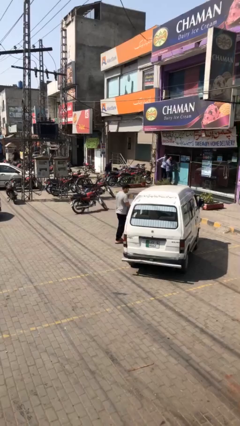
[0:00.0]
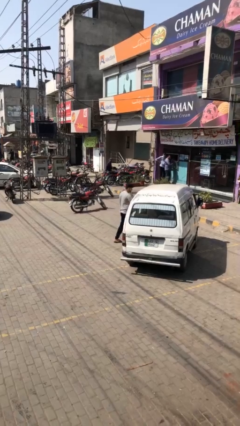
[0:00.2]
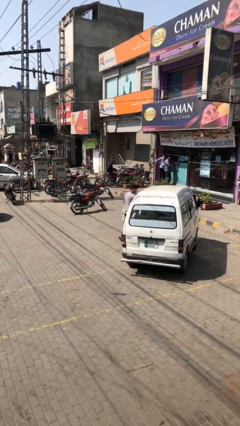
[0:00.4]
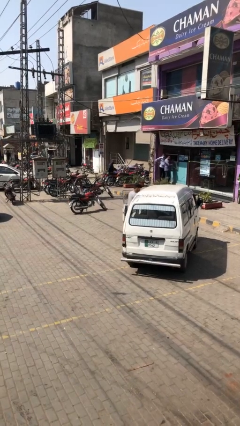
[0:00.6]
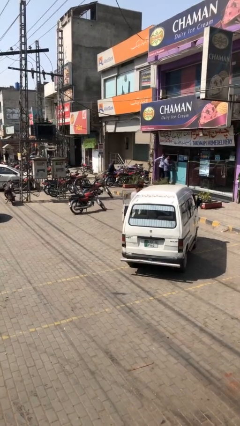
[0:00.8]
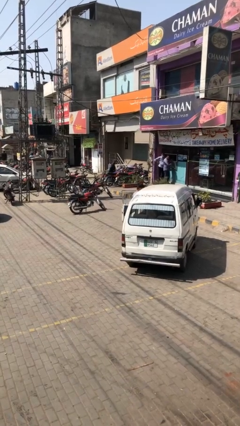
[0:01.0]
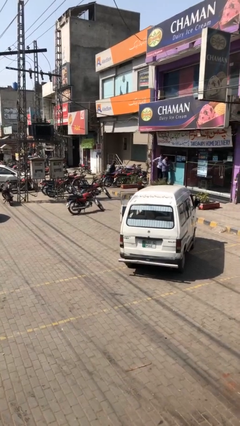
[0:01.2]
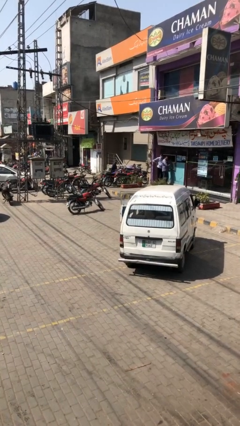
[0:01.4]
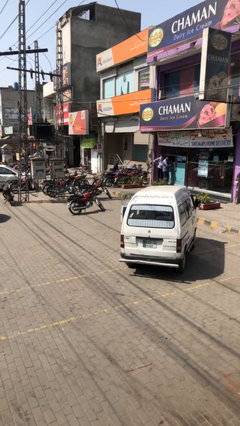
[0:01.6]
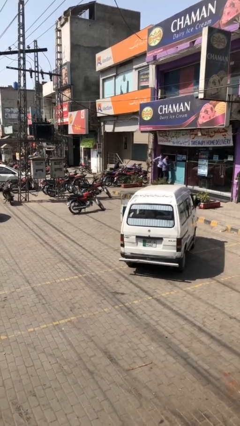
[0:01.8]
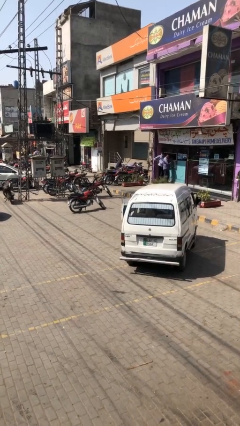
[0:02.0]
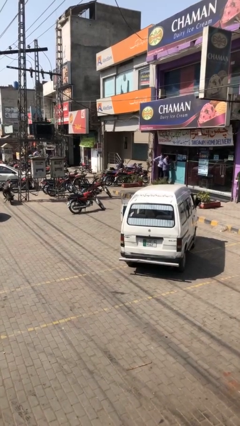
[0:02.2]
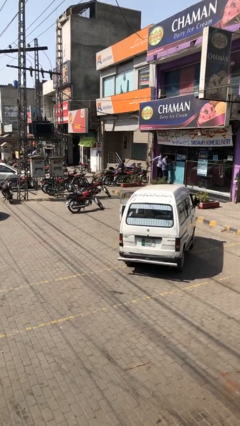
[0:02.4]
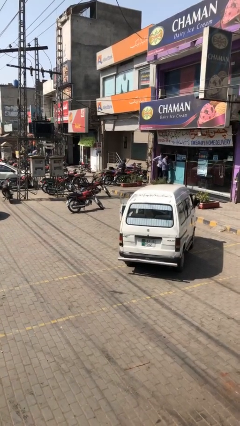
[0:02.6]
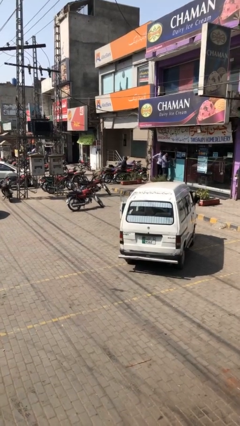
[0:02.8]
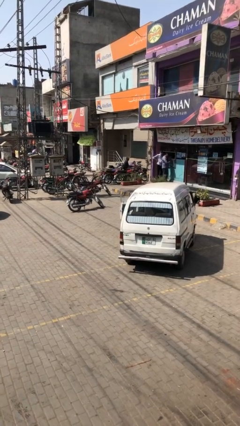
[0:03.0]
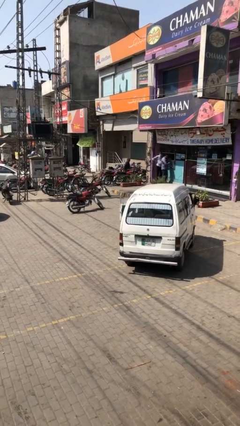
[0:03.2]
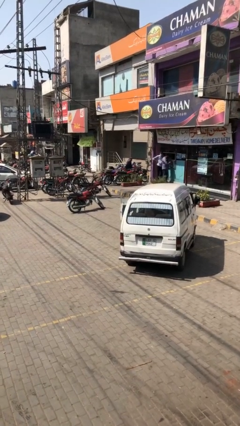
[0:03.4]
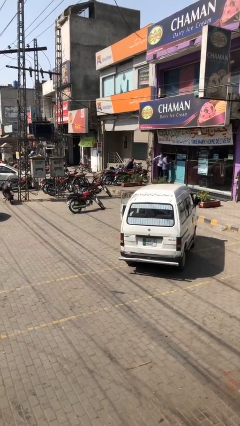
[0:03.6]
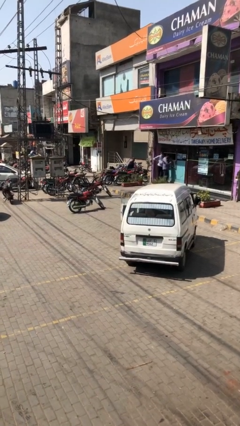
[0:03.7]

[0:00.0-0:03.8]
person enters car

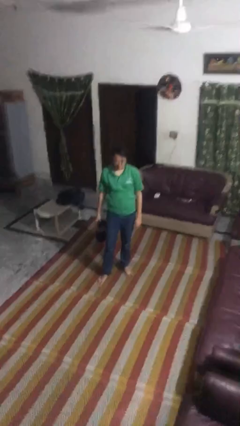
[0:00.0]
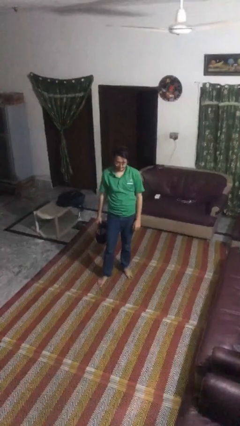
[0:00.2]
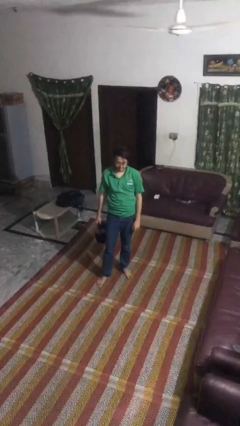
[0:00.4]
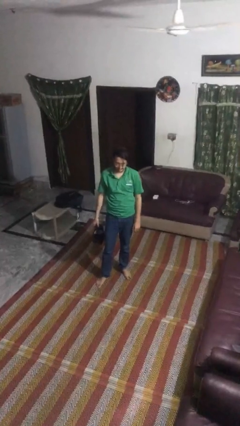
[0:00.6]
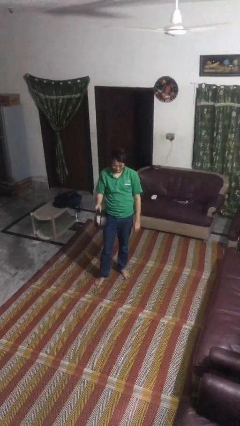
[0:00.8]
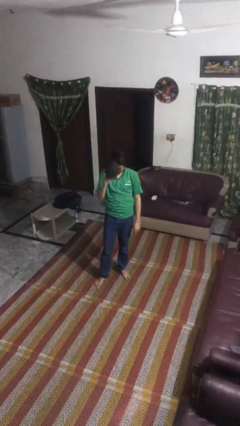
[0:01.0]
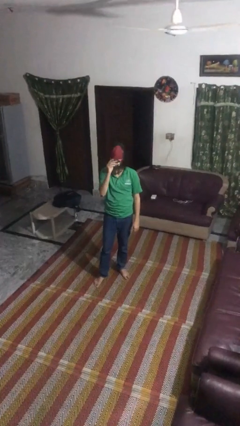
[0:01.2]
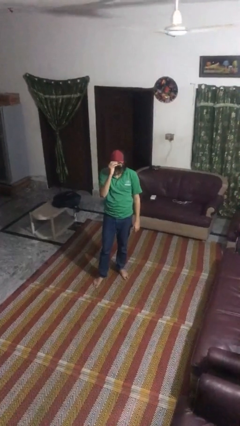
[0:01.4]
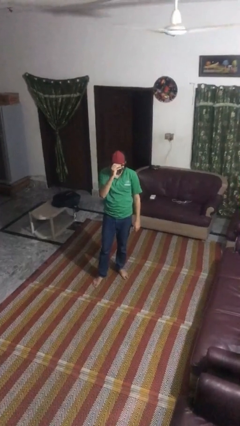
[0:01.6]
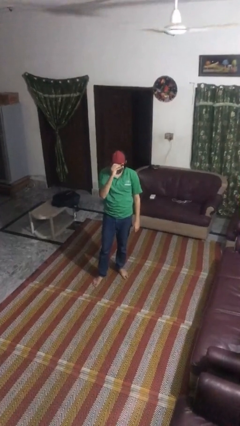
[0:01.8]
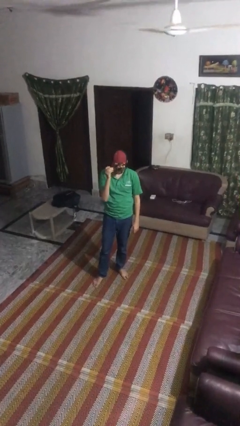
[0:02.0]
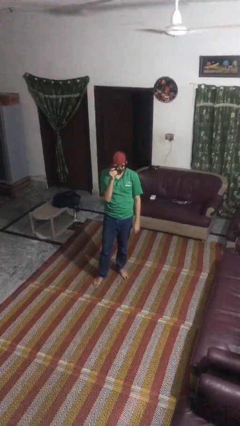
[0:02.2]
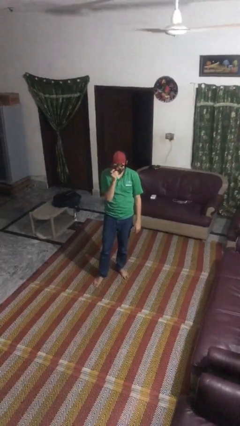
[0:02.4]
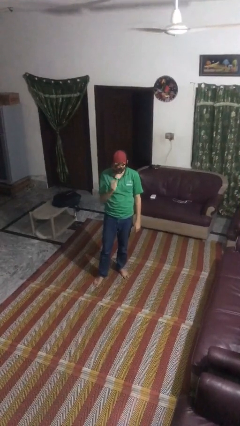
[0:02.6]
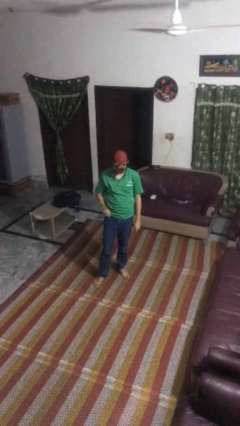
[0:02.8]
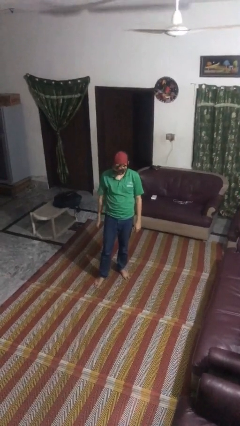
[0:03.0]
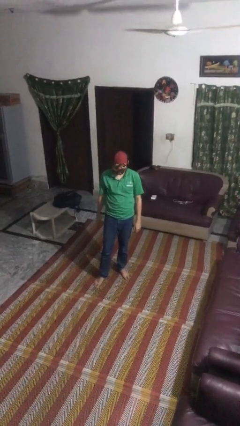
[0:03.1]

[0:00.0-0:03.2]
person puts on hat

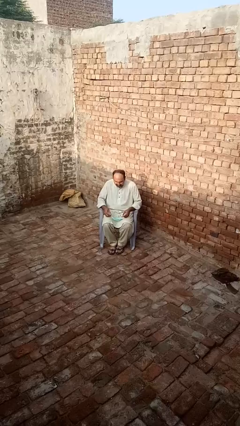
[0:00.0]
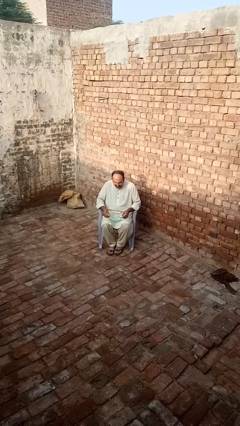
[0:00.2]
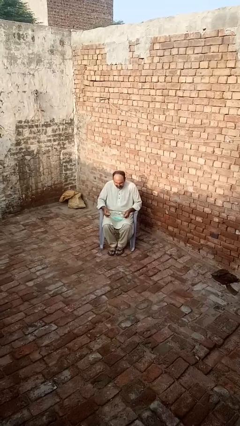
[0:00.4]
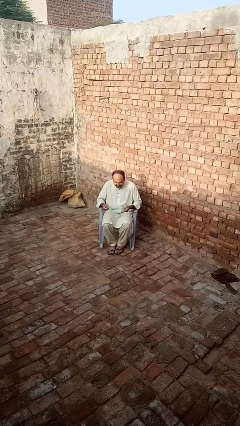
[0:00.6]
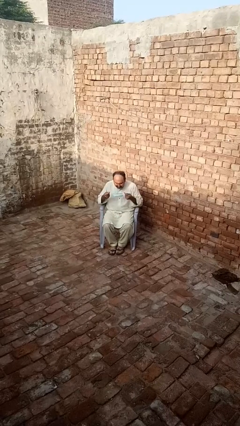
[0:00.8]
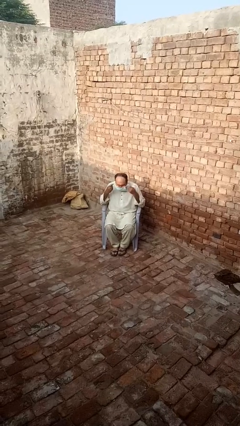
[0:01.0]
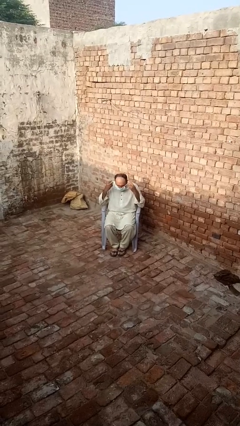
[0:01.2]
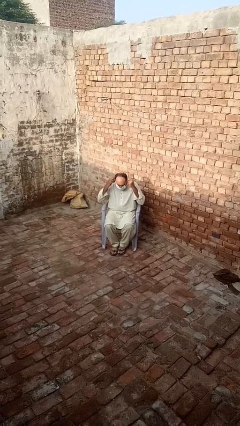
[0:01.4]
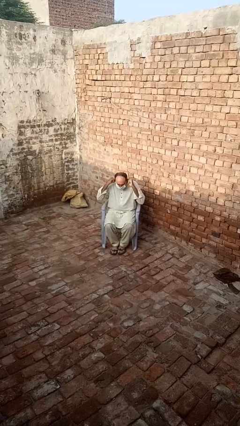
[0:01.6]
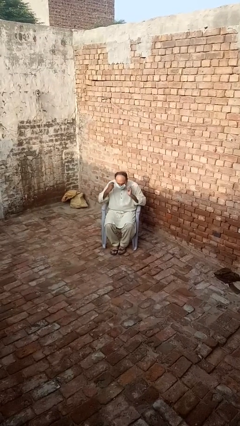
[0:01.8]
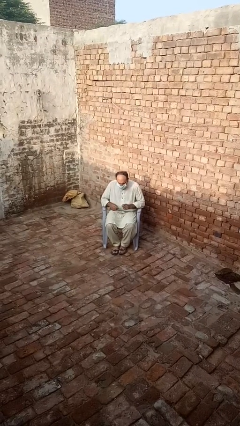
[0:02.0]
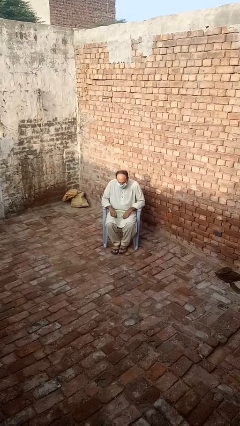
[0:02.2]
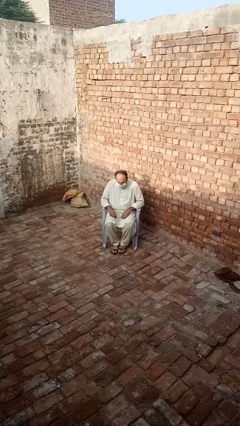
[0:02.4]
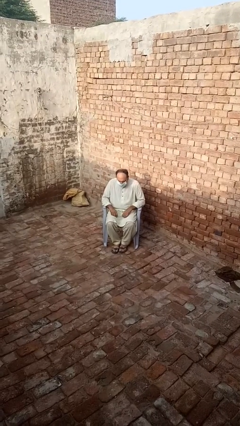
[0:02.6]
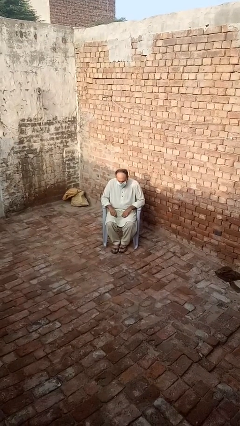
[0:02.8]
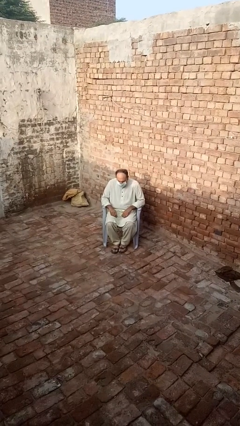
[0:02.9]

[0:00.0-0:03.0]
person puts on facemask

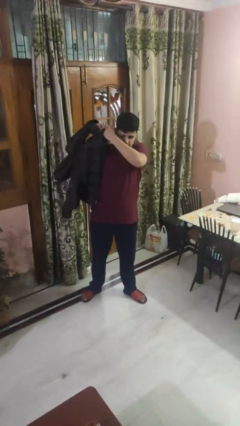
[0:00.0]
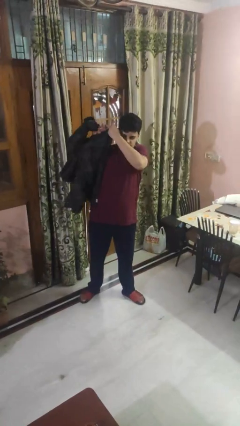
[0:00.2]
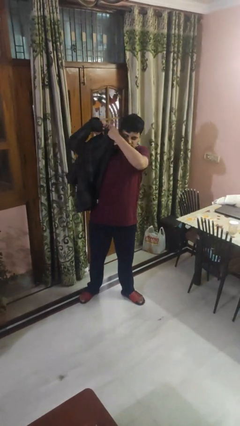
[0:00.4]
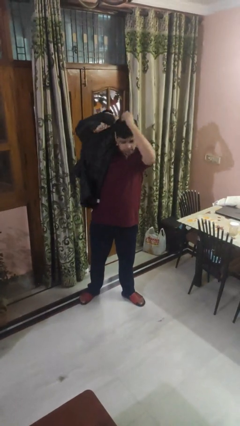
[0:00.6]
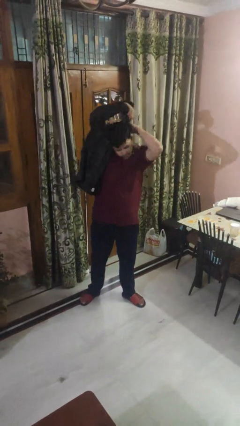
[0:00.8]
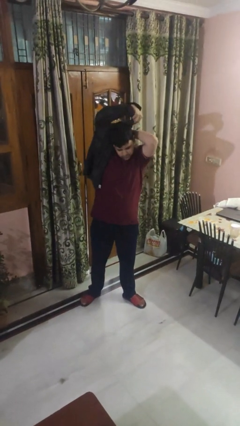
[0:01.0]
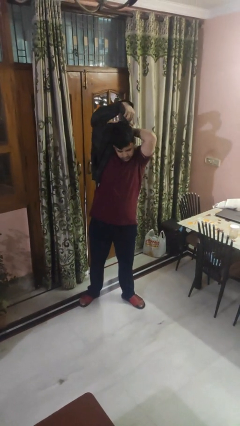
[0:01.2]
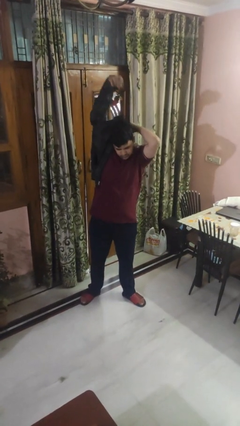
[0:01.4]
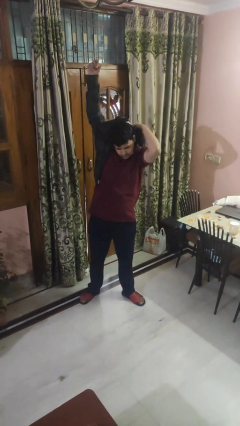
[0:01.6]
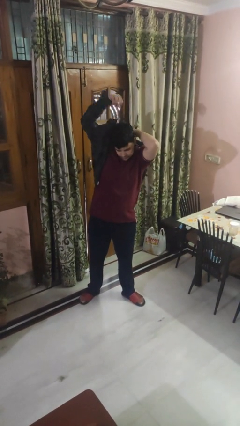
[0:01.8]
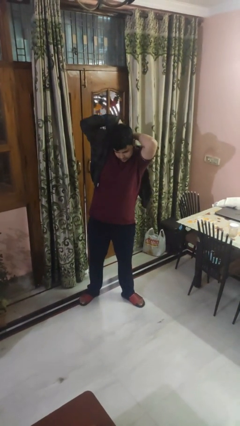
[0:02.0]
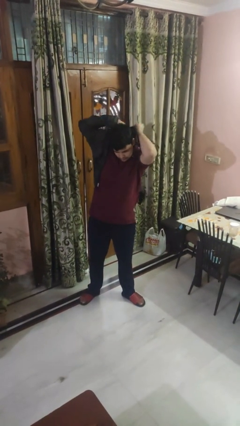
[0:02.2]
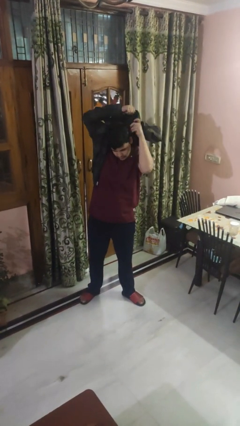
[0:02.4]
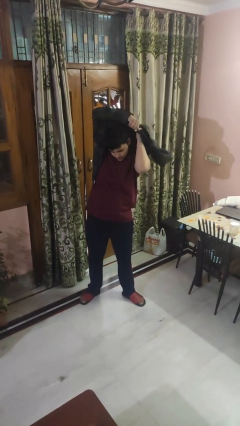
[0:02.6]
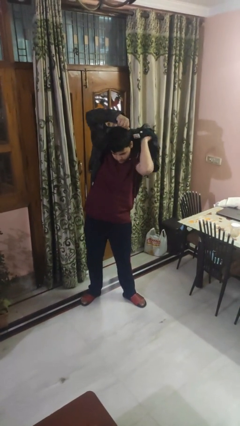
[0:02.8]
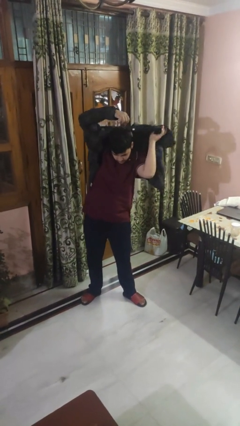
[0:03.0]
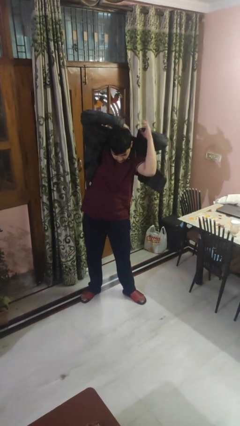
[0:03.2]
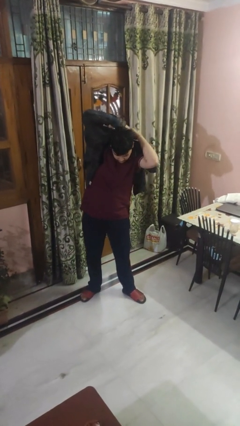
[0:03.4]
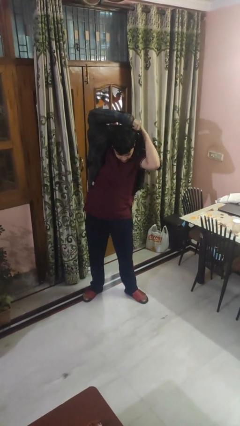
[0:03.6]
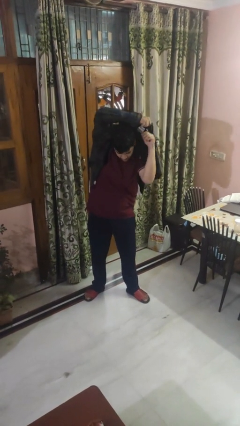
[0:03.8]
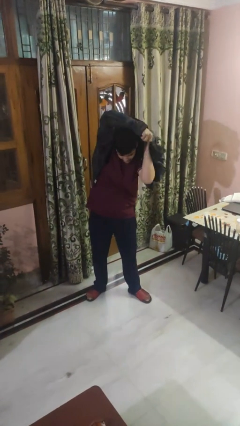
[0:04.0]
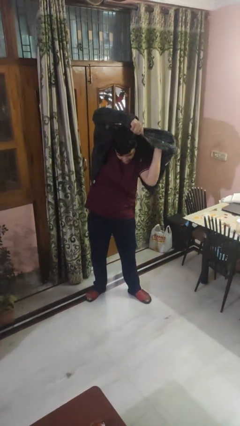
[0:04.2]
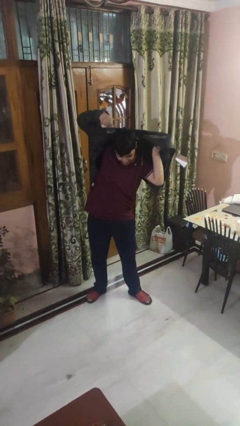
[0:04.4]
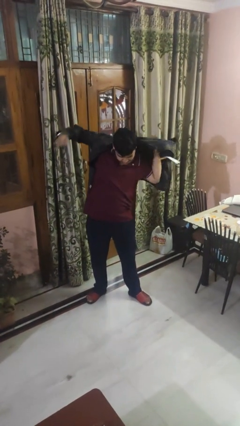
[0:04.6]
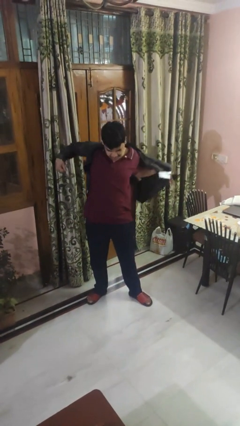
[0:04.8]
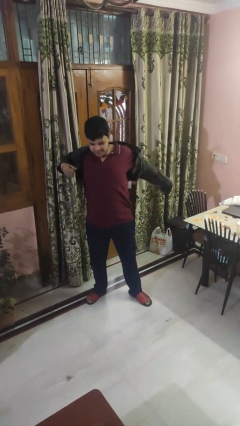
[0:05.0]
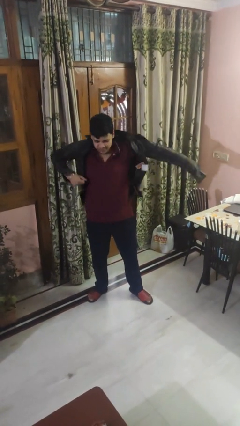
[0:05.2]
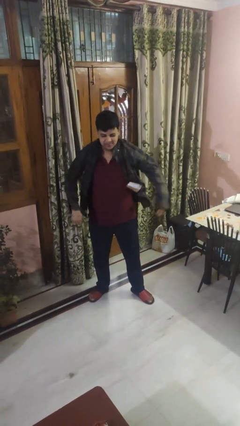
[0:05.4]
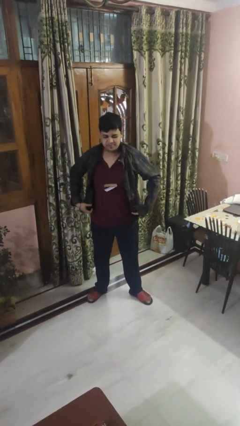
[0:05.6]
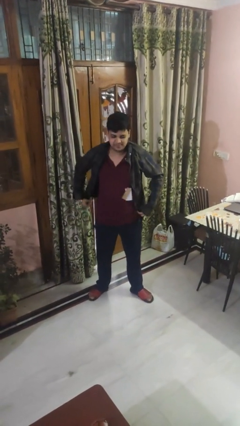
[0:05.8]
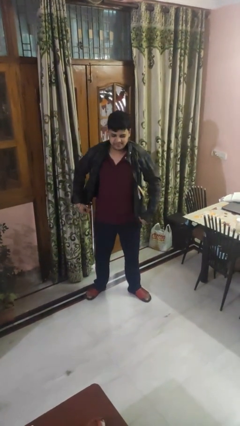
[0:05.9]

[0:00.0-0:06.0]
person puts on shirt

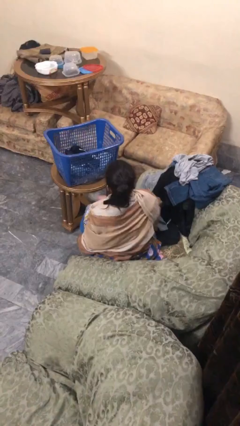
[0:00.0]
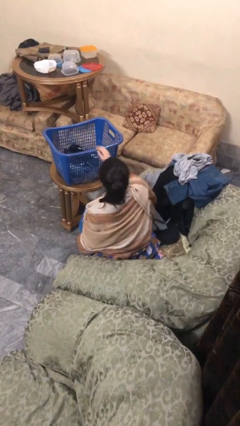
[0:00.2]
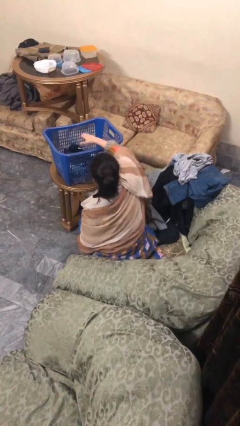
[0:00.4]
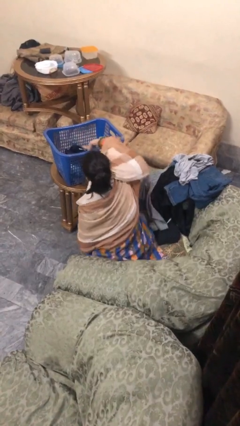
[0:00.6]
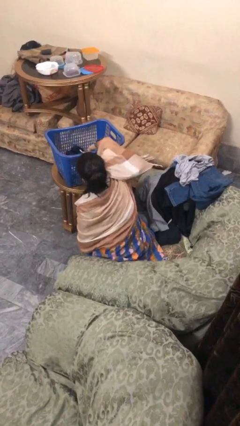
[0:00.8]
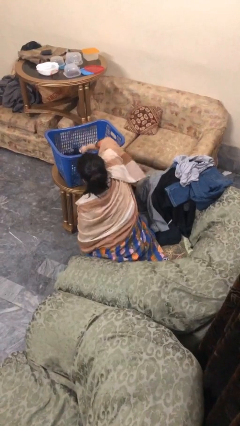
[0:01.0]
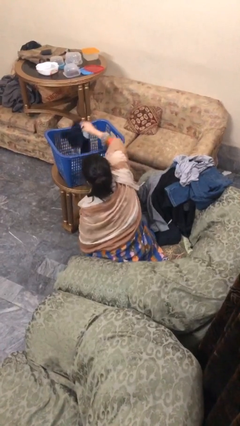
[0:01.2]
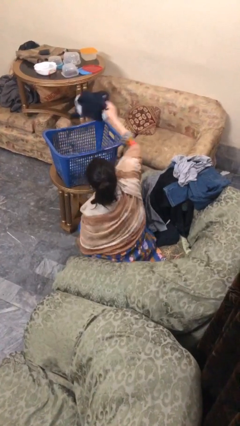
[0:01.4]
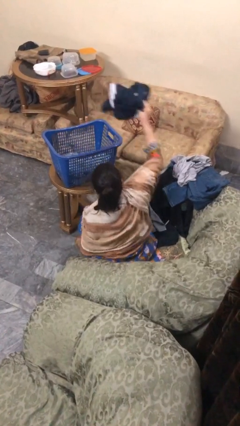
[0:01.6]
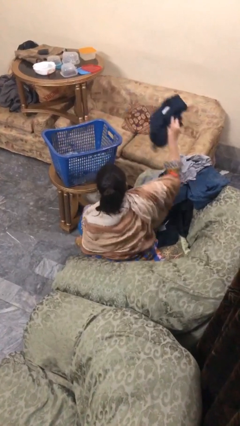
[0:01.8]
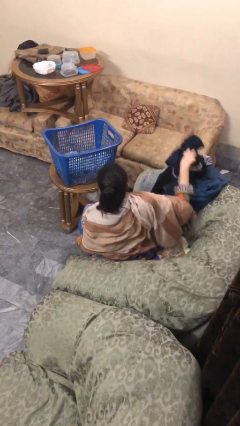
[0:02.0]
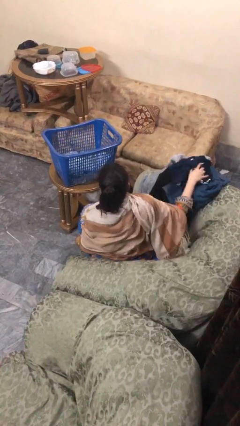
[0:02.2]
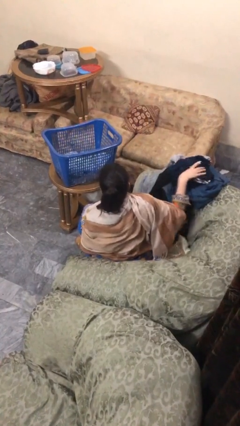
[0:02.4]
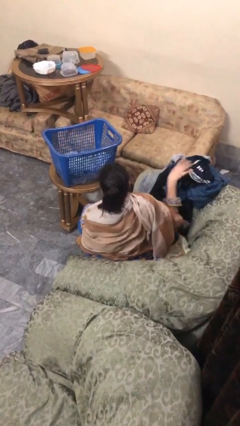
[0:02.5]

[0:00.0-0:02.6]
person takes object from basket
